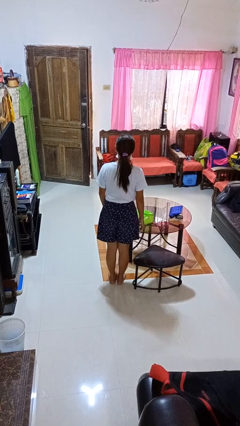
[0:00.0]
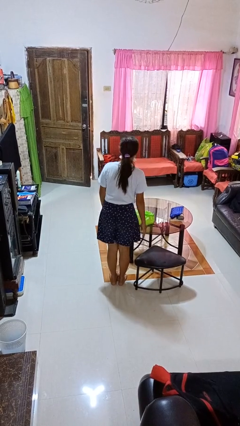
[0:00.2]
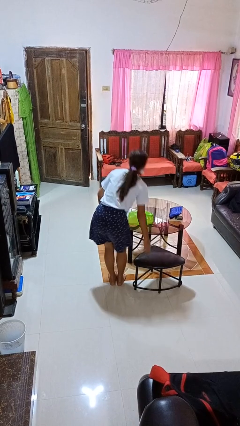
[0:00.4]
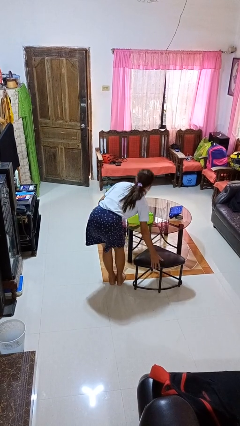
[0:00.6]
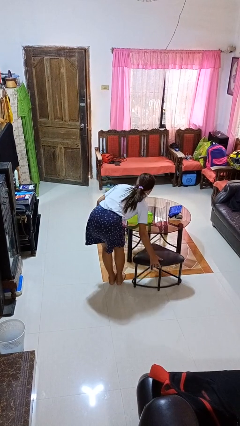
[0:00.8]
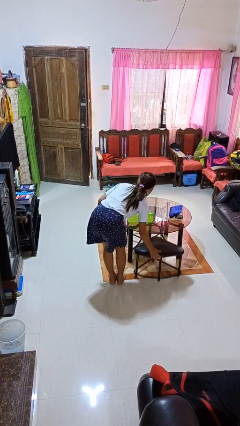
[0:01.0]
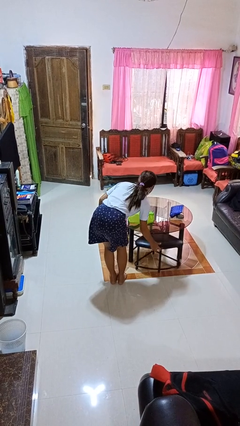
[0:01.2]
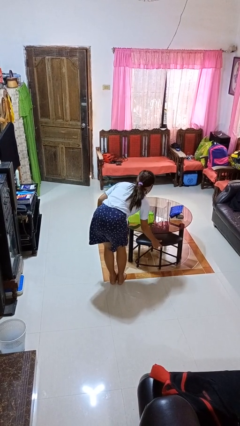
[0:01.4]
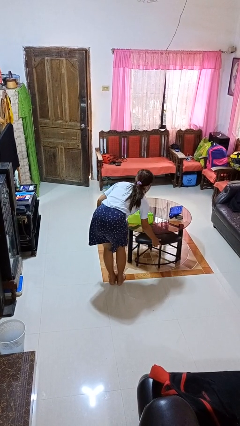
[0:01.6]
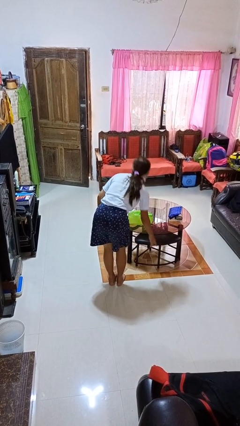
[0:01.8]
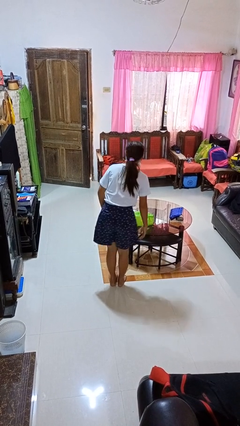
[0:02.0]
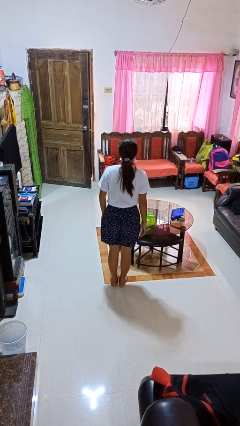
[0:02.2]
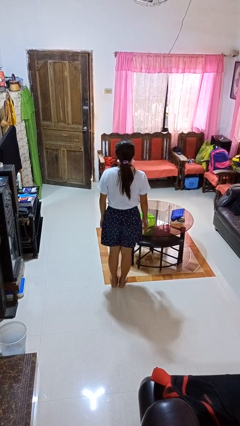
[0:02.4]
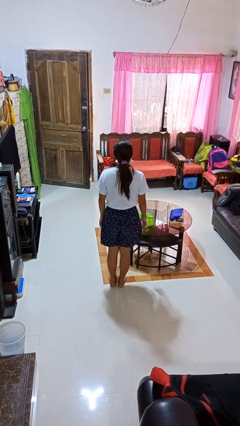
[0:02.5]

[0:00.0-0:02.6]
person pushes in chair

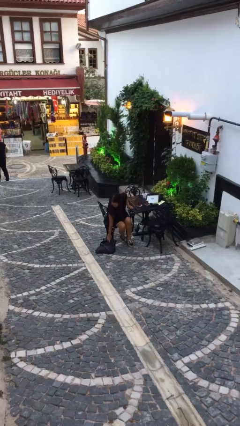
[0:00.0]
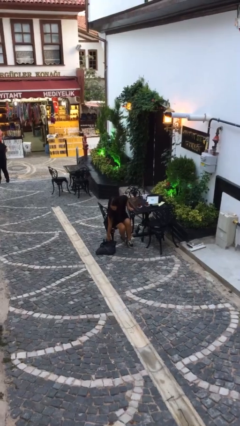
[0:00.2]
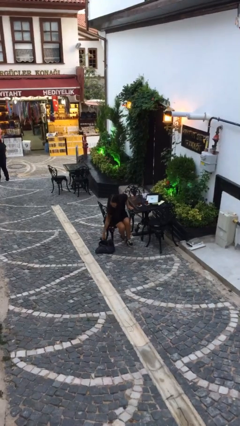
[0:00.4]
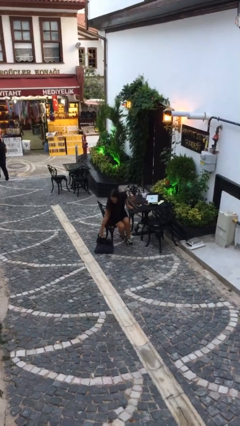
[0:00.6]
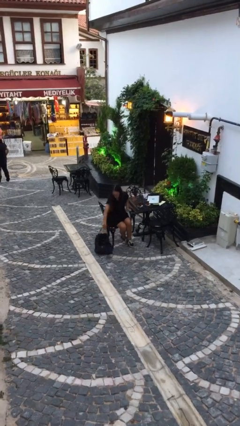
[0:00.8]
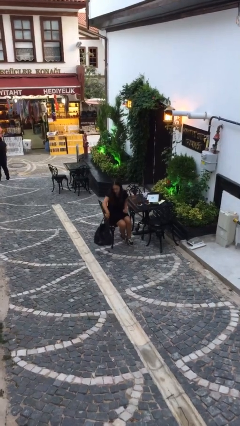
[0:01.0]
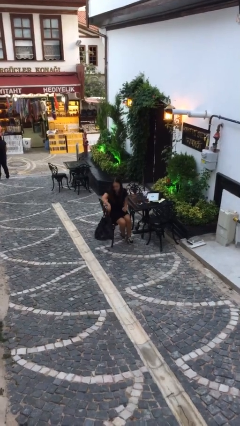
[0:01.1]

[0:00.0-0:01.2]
person picks up object from floor

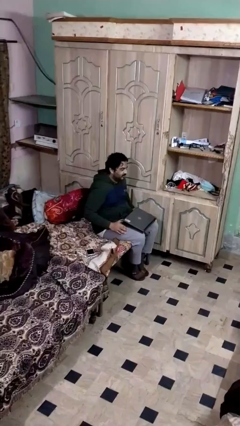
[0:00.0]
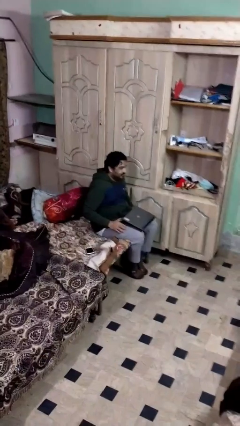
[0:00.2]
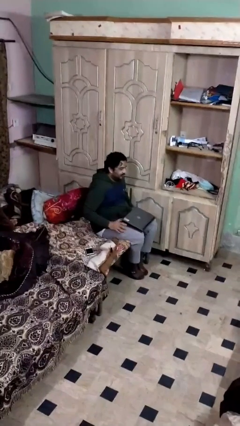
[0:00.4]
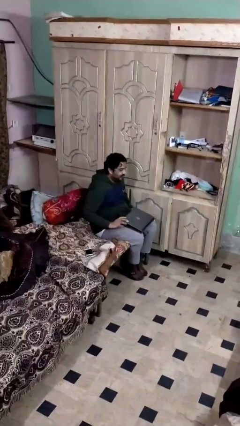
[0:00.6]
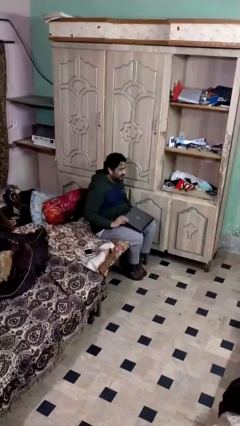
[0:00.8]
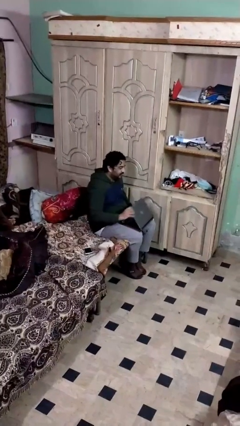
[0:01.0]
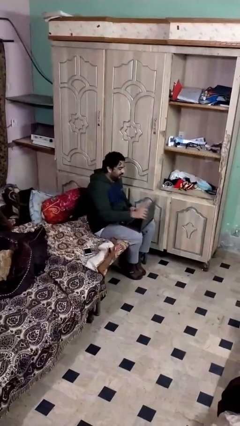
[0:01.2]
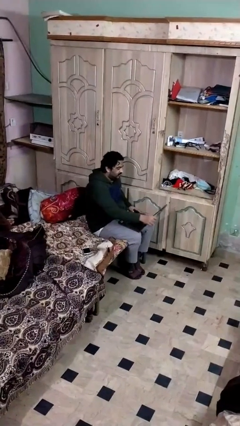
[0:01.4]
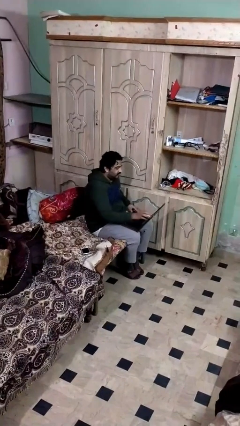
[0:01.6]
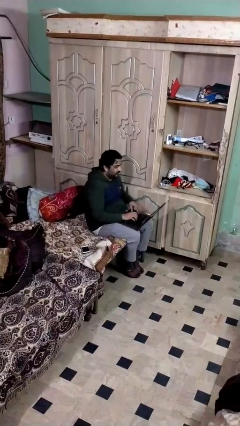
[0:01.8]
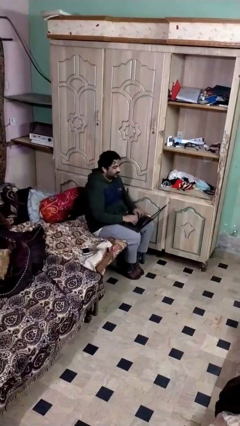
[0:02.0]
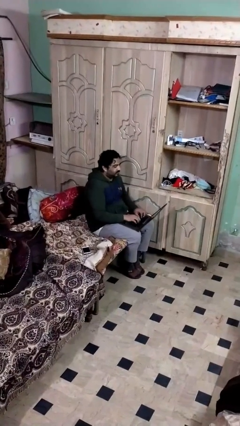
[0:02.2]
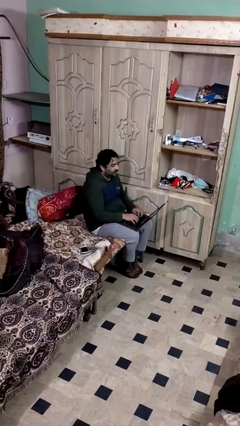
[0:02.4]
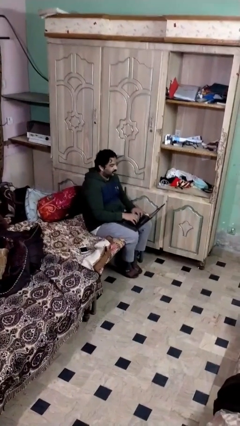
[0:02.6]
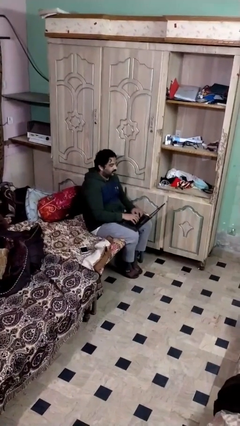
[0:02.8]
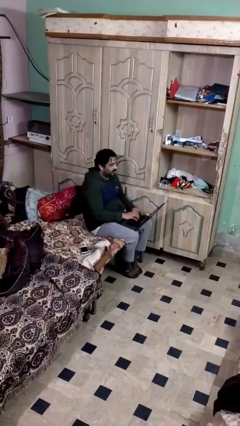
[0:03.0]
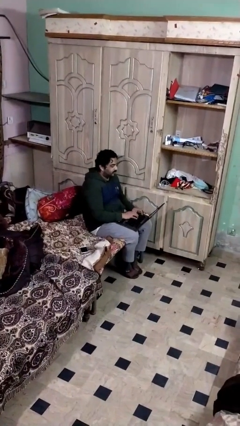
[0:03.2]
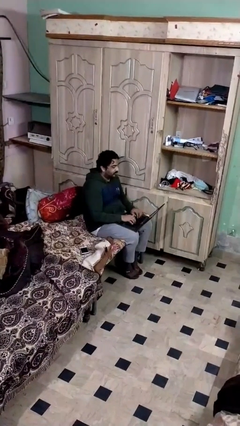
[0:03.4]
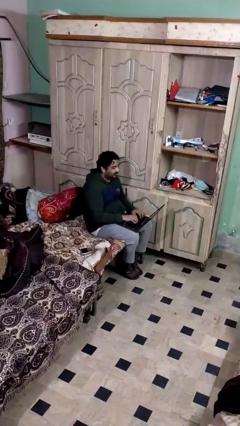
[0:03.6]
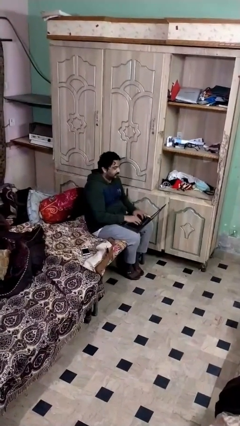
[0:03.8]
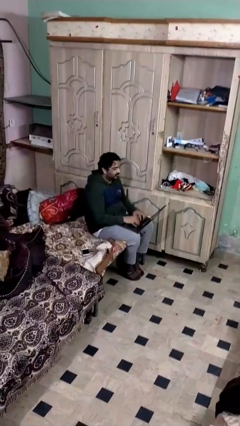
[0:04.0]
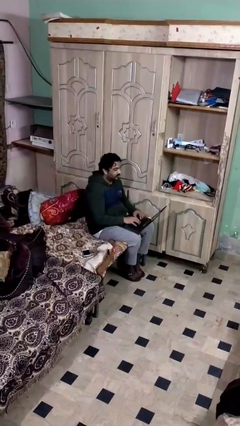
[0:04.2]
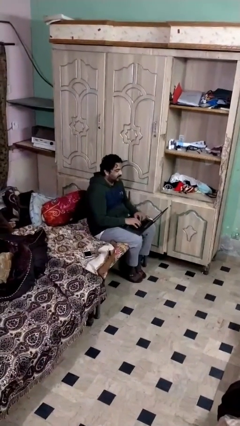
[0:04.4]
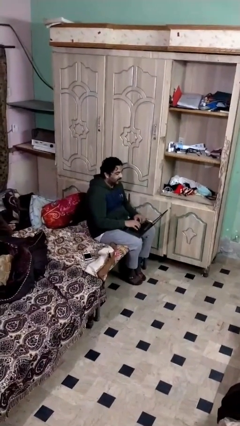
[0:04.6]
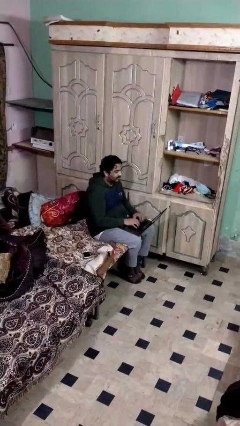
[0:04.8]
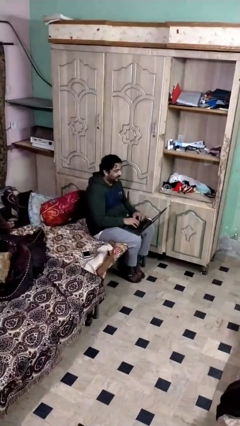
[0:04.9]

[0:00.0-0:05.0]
person interacts with laptop

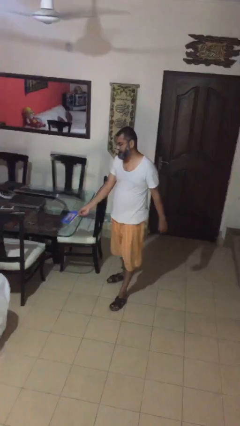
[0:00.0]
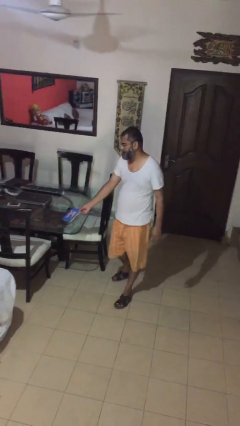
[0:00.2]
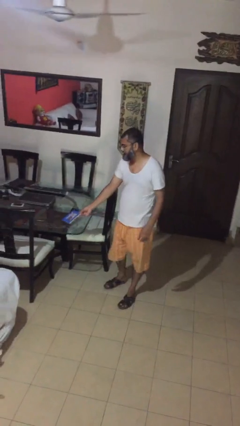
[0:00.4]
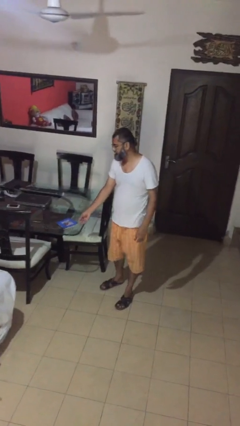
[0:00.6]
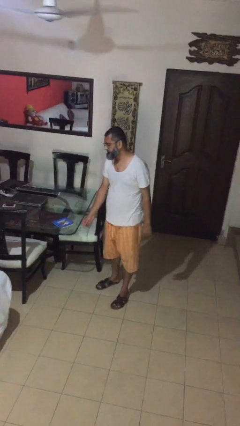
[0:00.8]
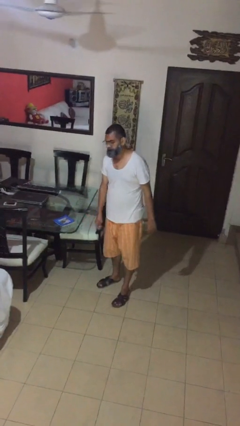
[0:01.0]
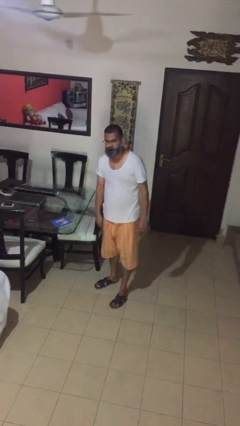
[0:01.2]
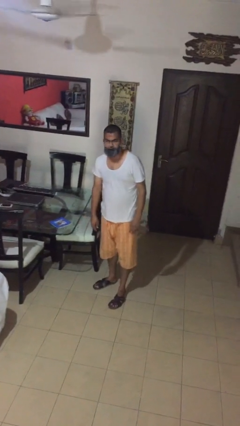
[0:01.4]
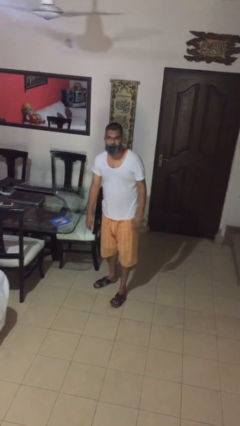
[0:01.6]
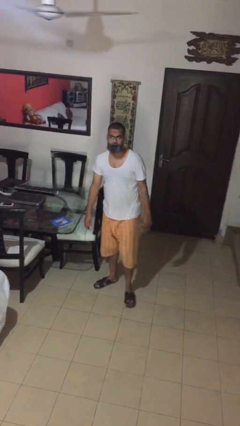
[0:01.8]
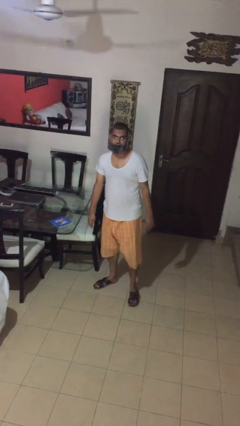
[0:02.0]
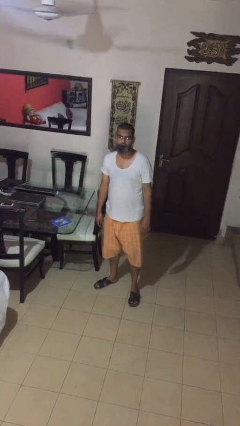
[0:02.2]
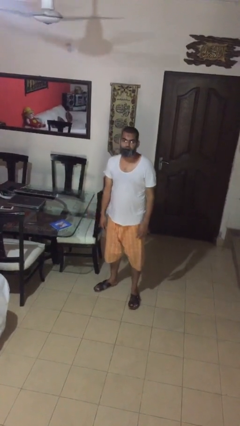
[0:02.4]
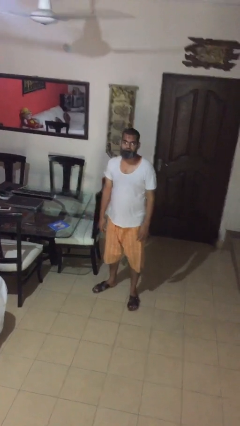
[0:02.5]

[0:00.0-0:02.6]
person puts down object on table

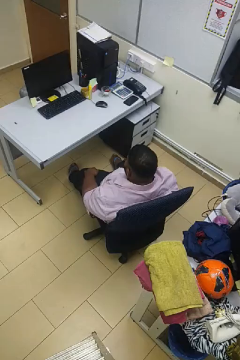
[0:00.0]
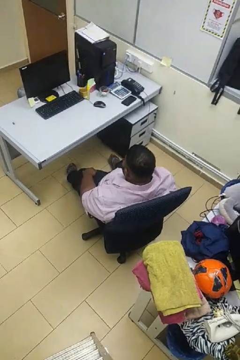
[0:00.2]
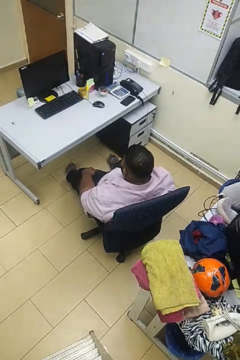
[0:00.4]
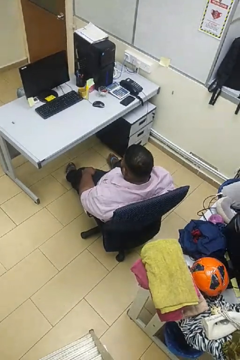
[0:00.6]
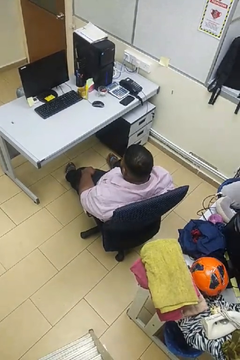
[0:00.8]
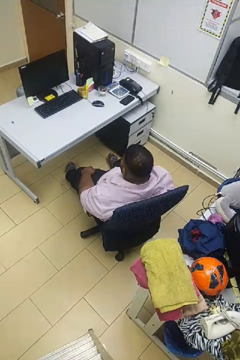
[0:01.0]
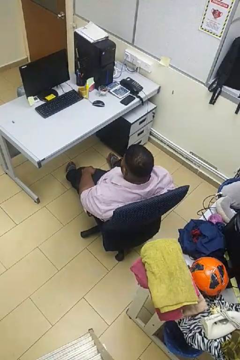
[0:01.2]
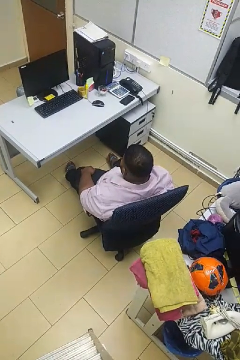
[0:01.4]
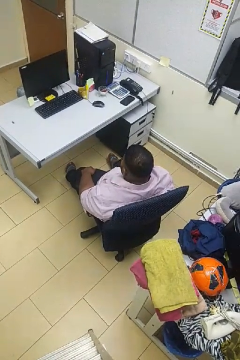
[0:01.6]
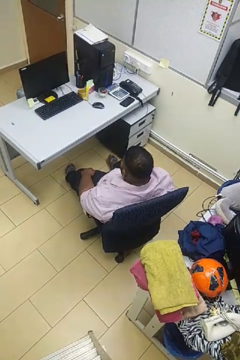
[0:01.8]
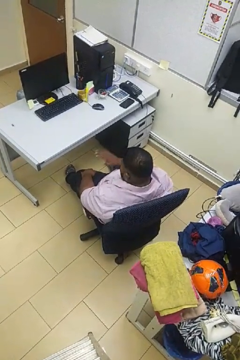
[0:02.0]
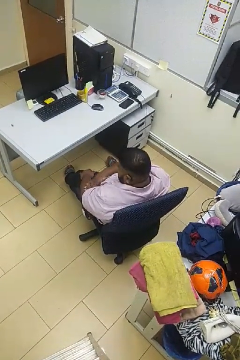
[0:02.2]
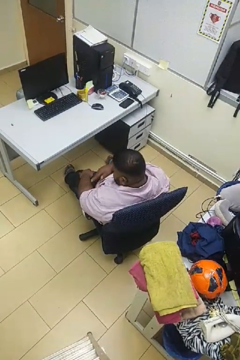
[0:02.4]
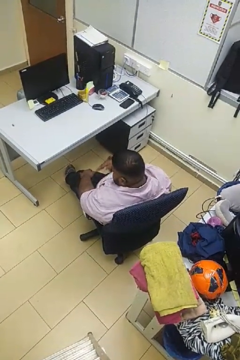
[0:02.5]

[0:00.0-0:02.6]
person swats bug

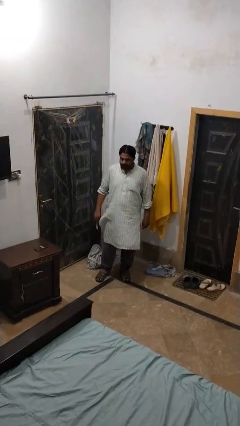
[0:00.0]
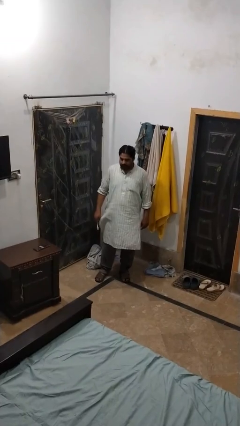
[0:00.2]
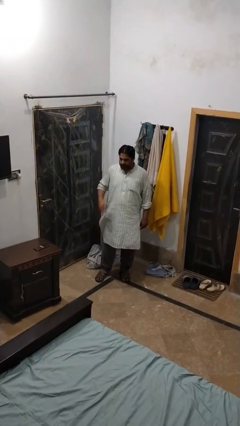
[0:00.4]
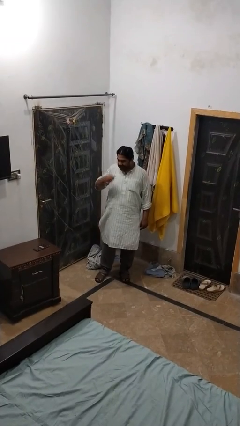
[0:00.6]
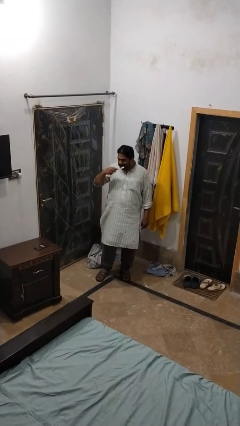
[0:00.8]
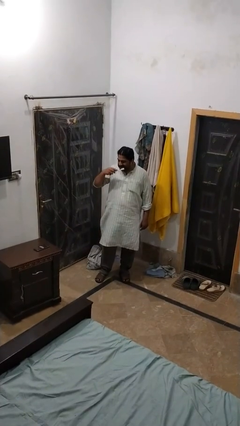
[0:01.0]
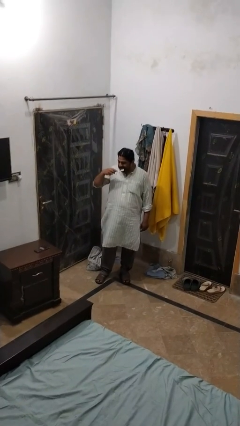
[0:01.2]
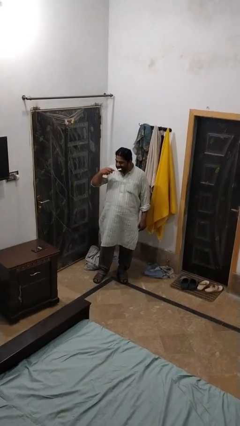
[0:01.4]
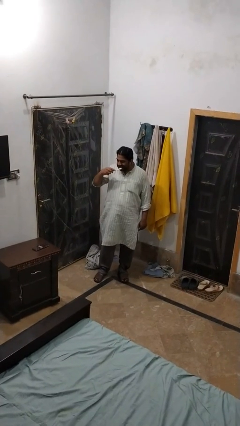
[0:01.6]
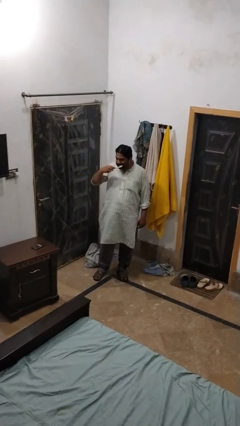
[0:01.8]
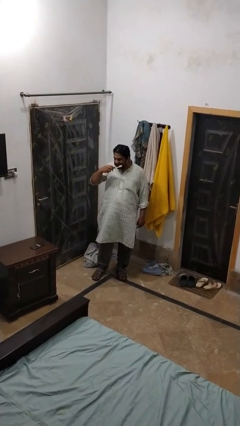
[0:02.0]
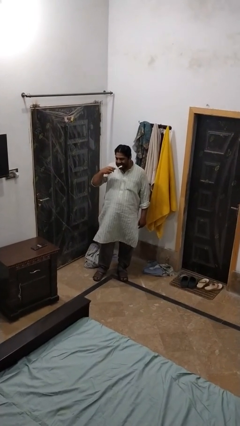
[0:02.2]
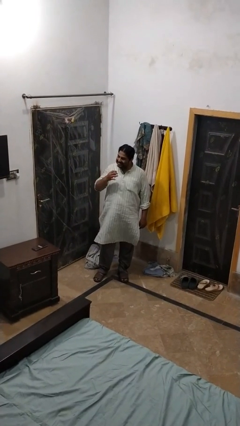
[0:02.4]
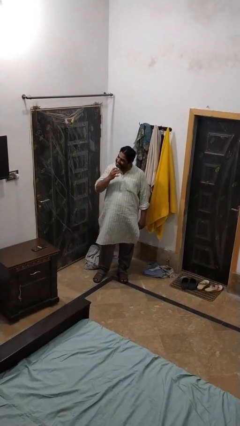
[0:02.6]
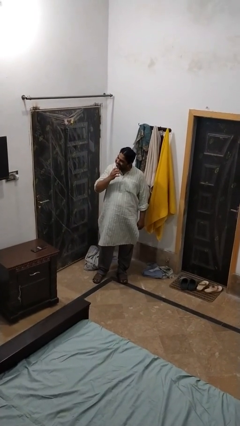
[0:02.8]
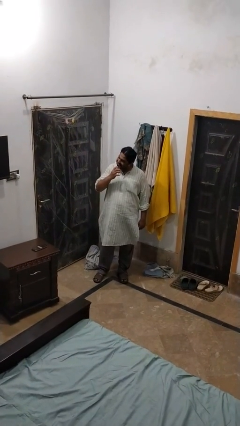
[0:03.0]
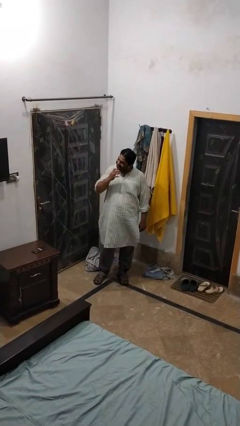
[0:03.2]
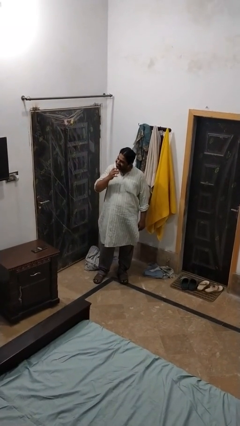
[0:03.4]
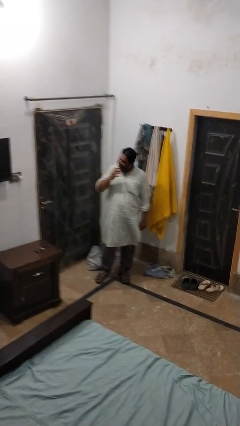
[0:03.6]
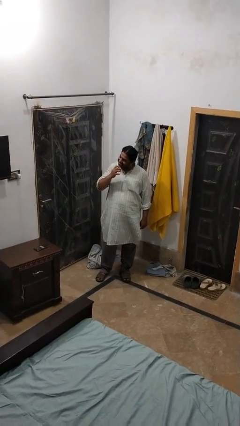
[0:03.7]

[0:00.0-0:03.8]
person brushes teeth

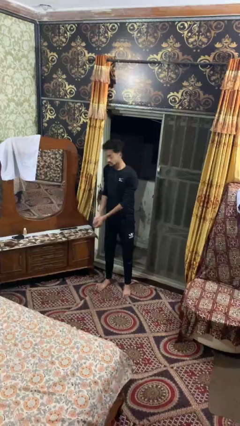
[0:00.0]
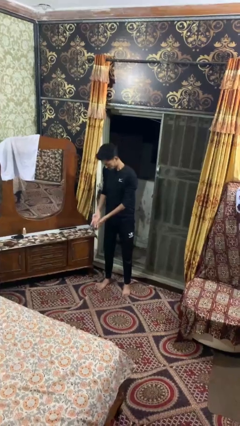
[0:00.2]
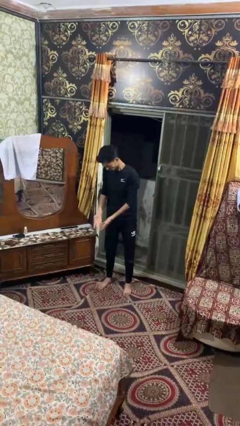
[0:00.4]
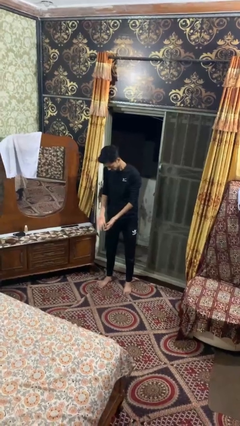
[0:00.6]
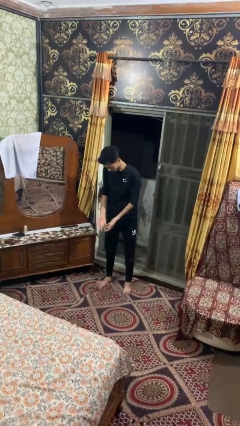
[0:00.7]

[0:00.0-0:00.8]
person catches dropped object
